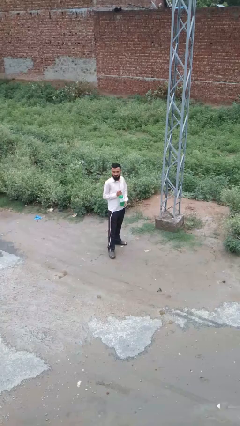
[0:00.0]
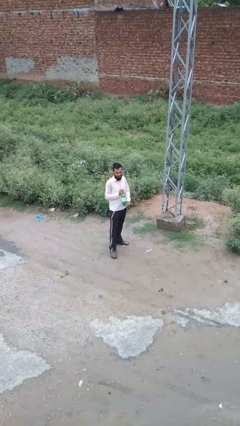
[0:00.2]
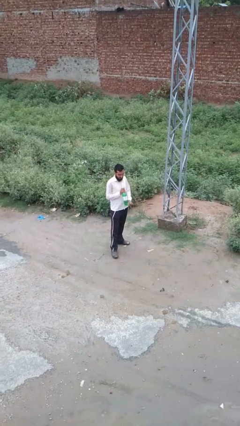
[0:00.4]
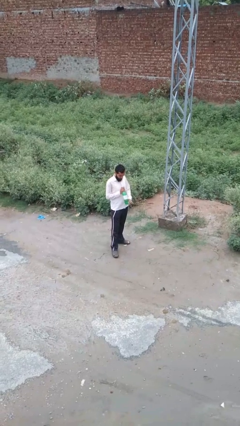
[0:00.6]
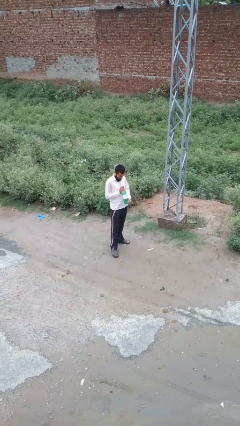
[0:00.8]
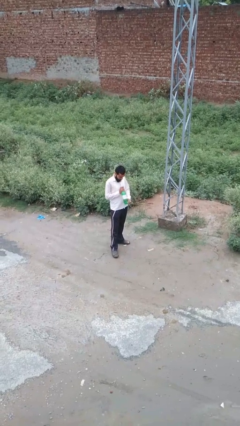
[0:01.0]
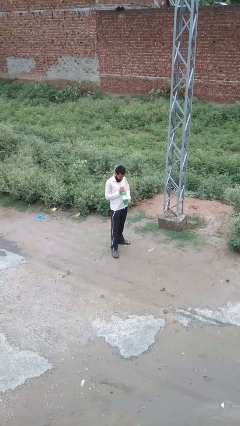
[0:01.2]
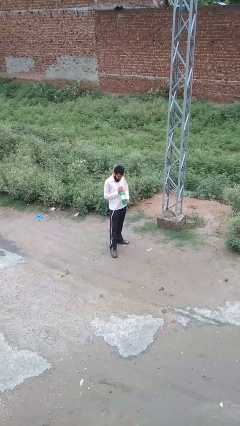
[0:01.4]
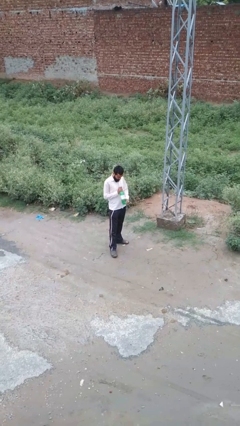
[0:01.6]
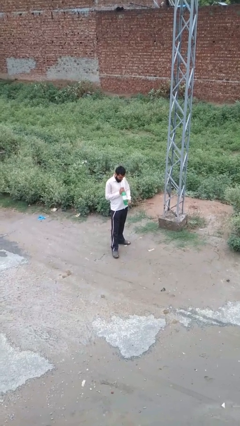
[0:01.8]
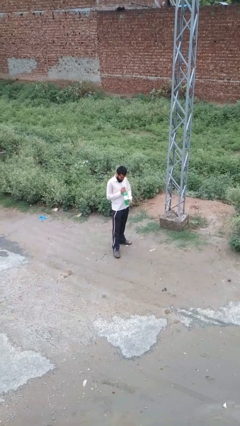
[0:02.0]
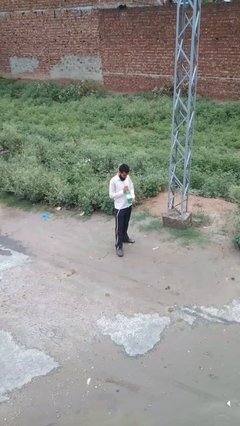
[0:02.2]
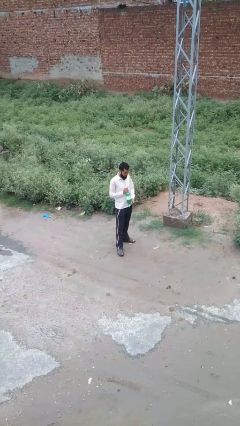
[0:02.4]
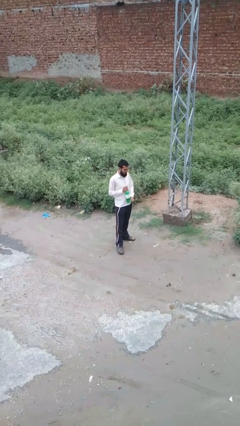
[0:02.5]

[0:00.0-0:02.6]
person drinks from straw

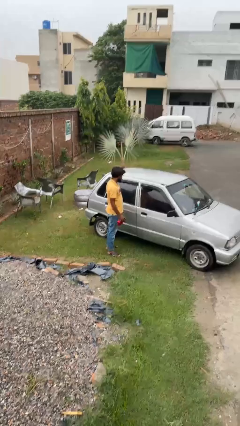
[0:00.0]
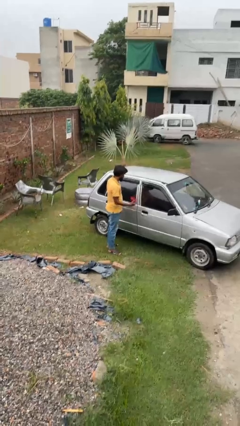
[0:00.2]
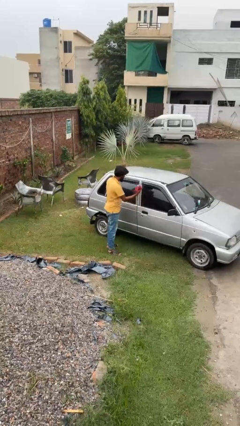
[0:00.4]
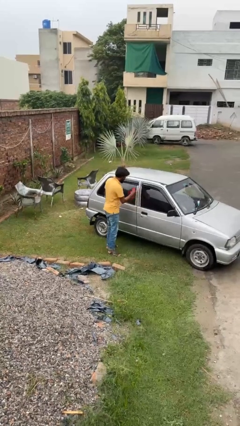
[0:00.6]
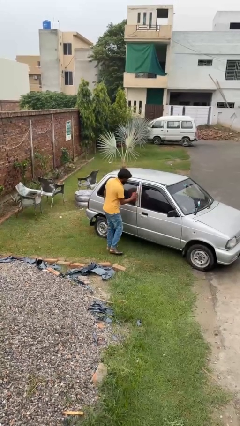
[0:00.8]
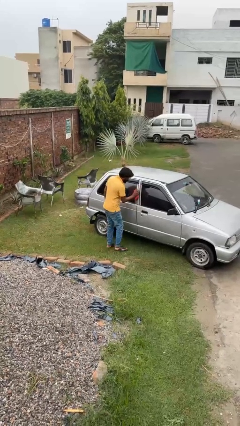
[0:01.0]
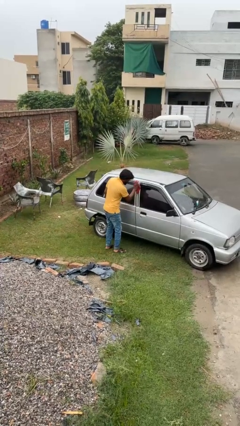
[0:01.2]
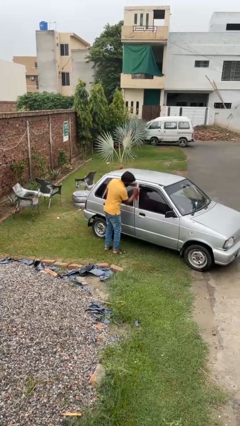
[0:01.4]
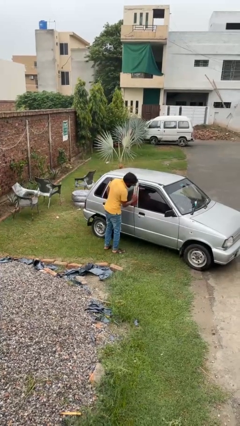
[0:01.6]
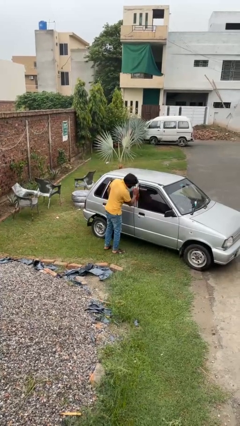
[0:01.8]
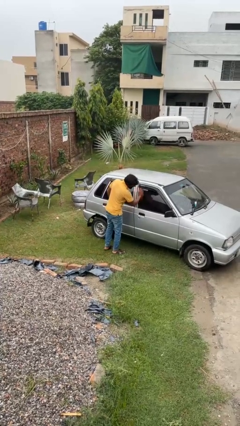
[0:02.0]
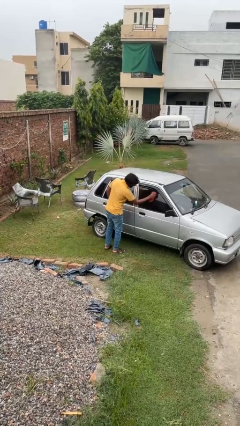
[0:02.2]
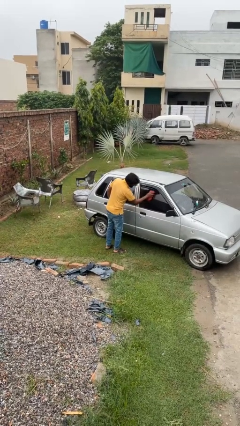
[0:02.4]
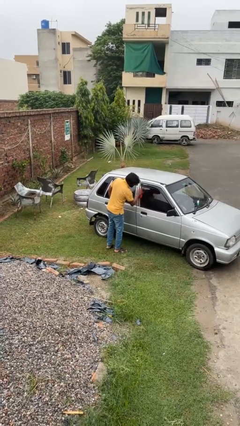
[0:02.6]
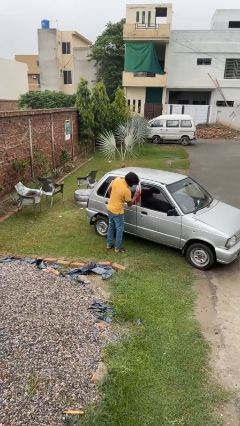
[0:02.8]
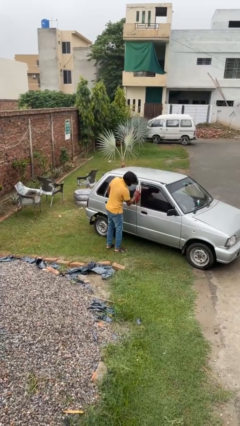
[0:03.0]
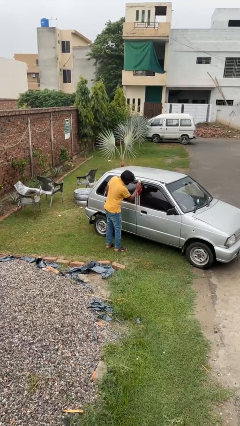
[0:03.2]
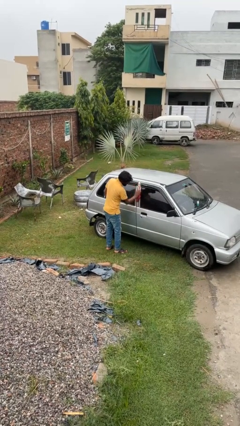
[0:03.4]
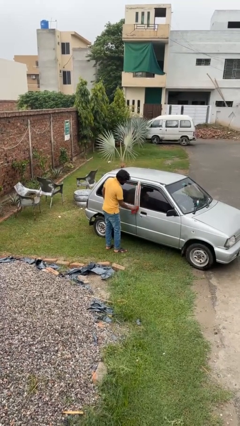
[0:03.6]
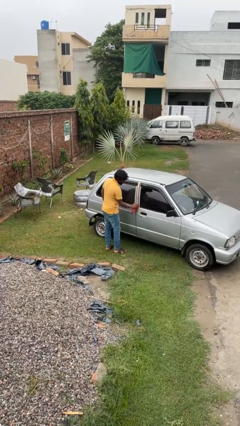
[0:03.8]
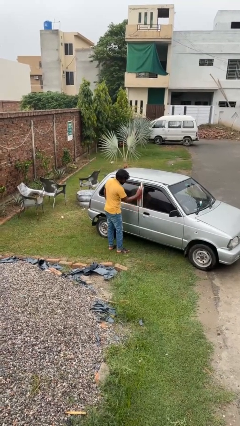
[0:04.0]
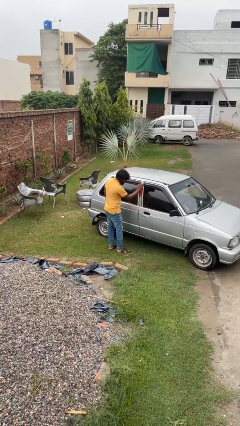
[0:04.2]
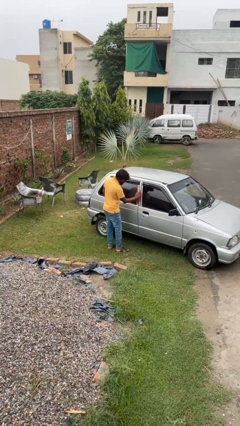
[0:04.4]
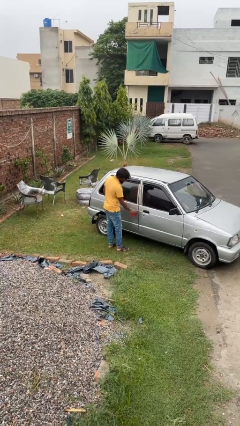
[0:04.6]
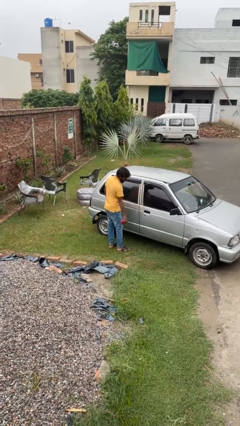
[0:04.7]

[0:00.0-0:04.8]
person polishes car with rag

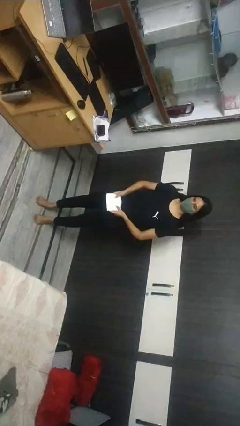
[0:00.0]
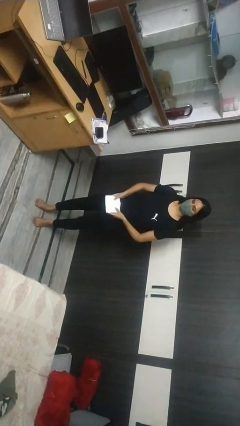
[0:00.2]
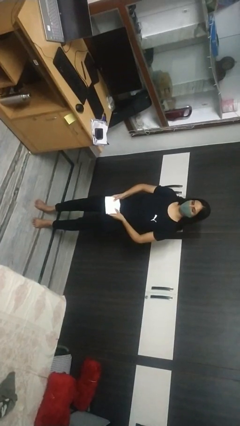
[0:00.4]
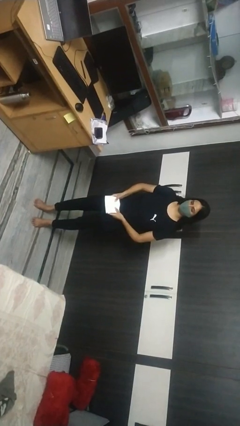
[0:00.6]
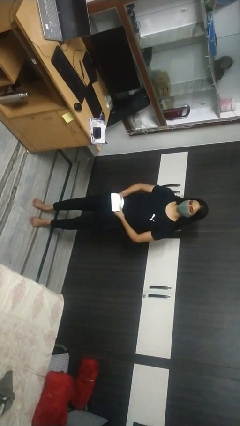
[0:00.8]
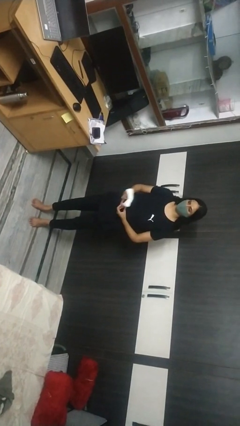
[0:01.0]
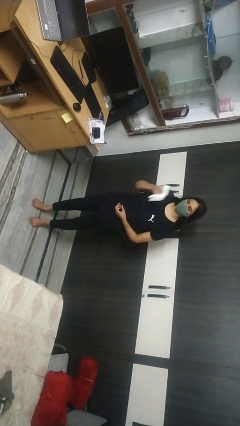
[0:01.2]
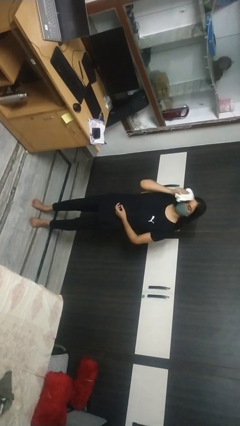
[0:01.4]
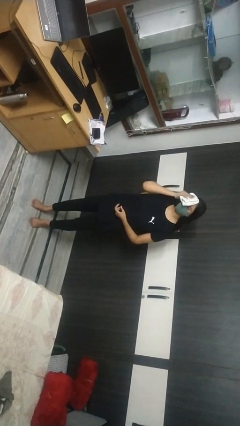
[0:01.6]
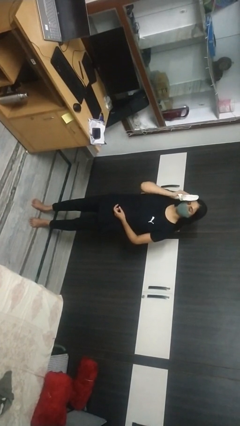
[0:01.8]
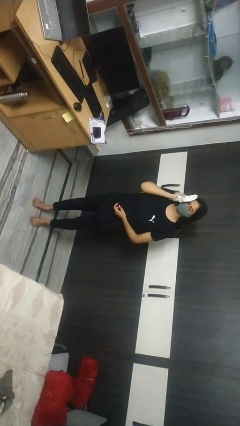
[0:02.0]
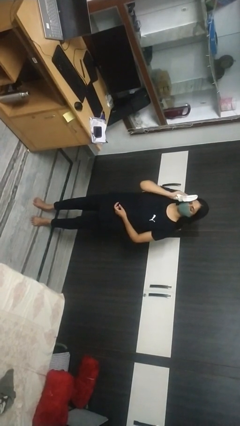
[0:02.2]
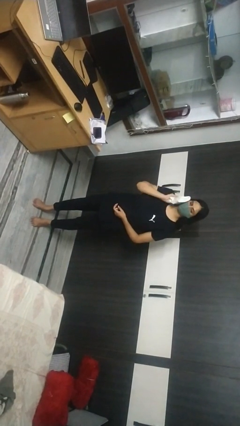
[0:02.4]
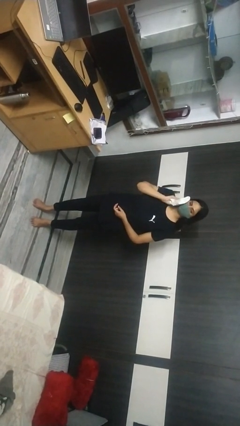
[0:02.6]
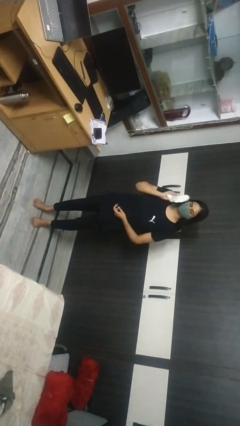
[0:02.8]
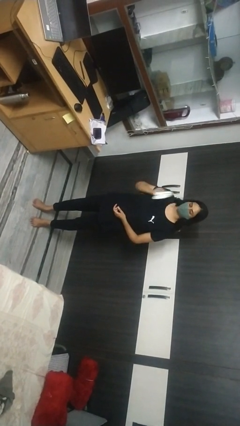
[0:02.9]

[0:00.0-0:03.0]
person wipes mouth with napkin

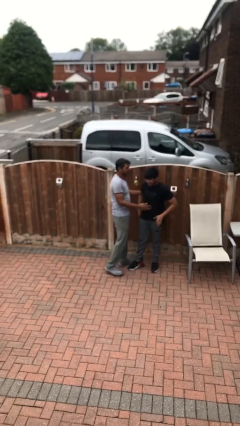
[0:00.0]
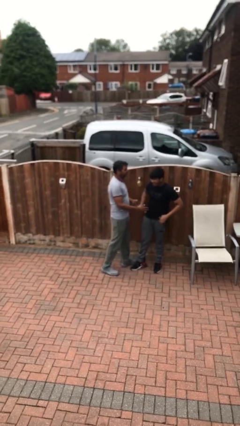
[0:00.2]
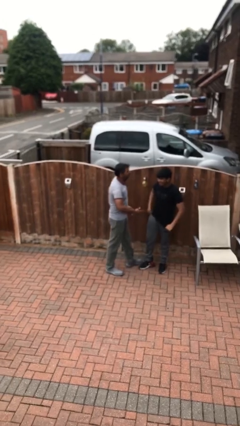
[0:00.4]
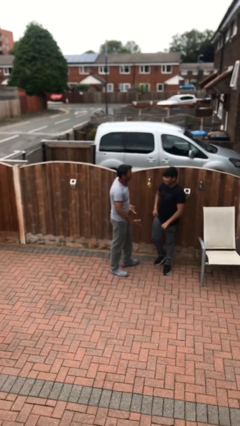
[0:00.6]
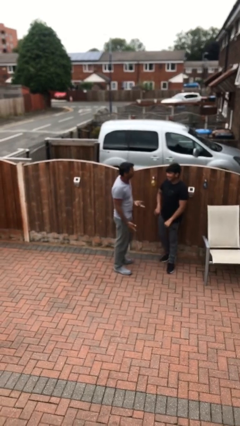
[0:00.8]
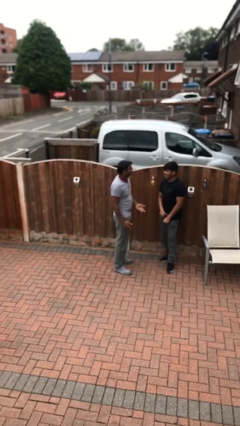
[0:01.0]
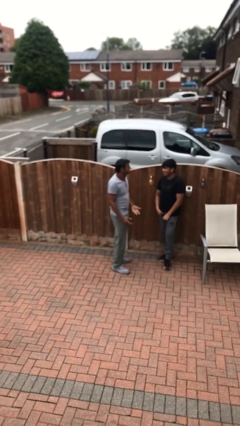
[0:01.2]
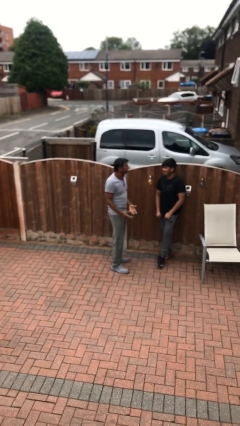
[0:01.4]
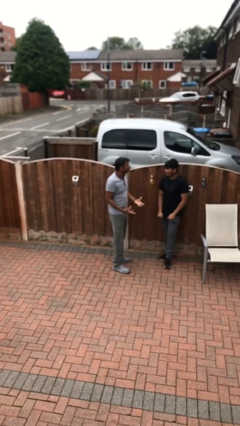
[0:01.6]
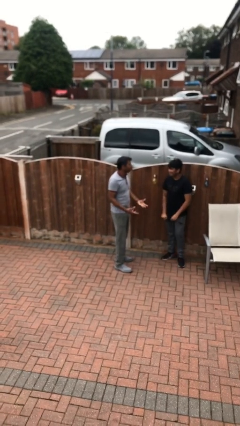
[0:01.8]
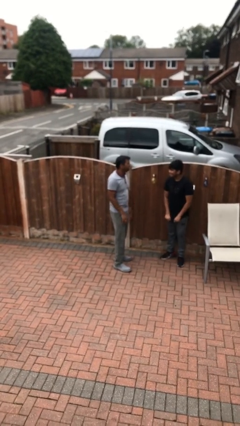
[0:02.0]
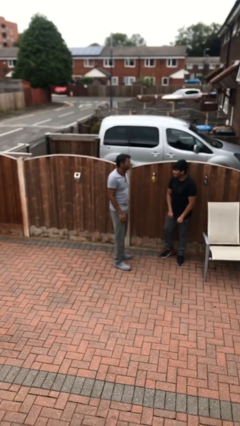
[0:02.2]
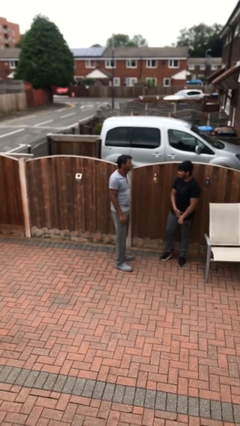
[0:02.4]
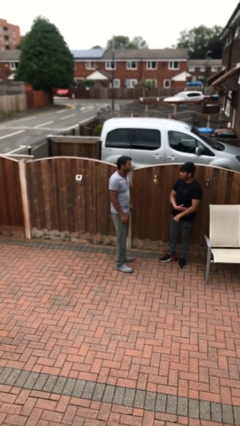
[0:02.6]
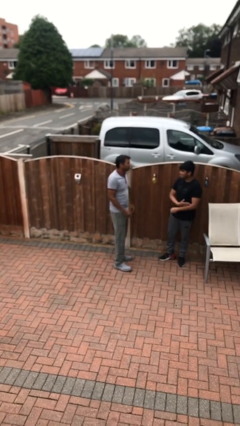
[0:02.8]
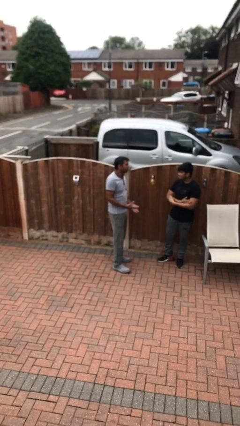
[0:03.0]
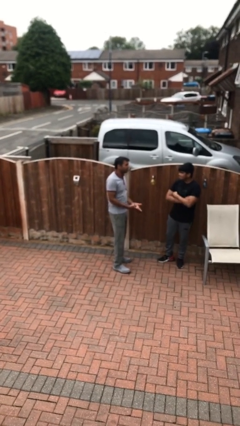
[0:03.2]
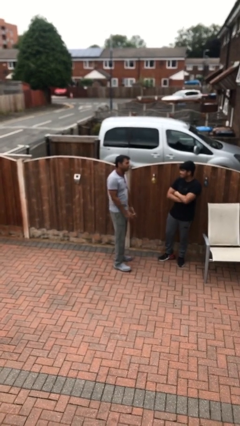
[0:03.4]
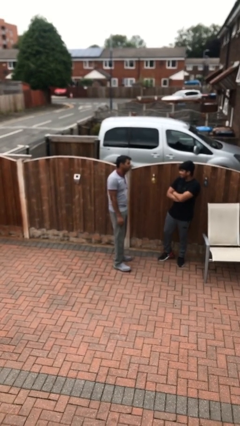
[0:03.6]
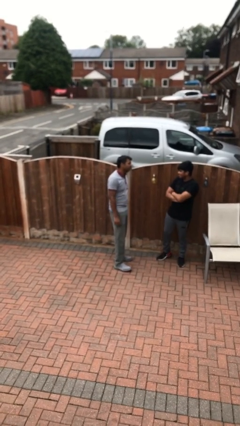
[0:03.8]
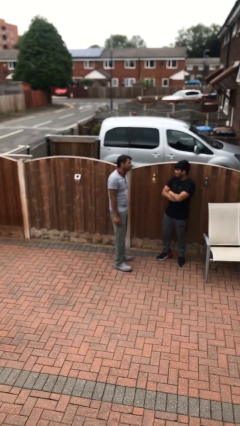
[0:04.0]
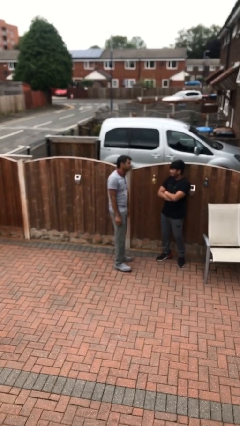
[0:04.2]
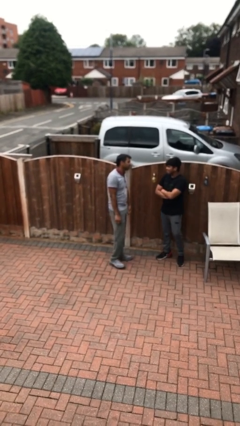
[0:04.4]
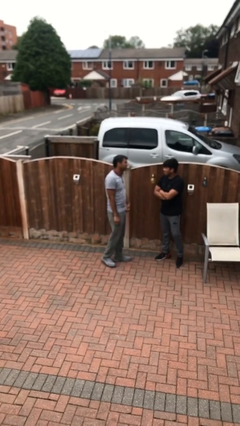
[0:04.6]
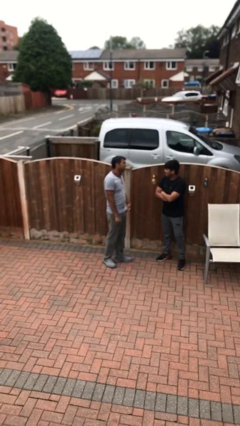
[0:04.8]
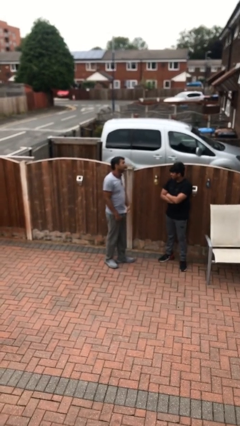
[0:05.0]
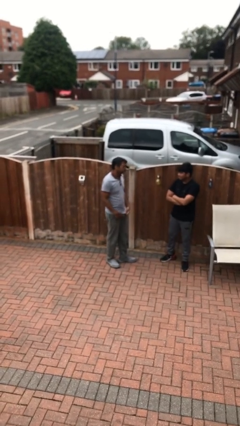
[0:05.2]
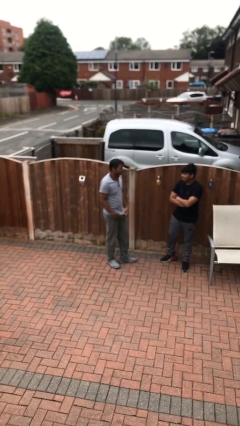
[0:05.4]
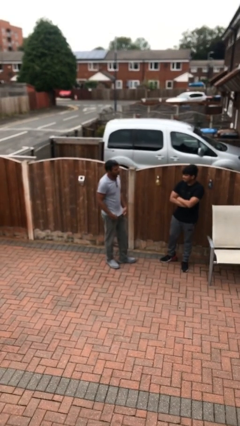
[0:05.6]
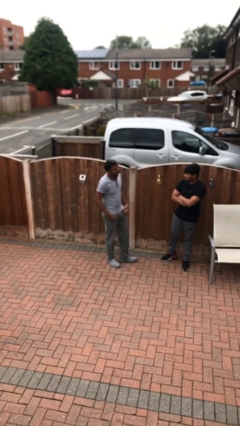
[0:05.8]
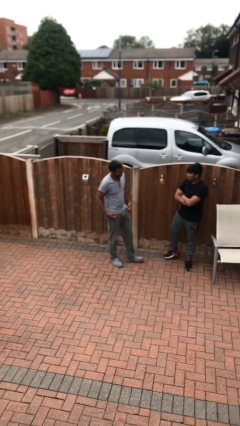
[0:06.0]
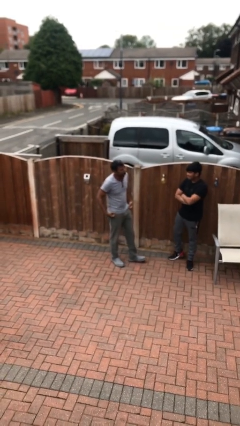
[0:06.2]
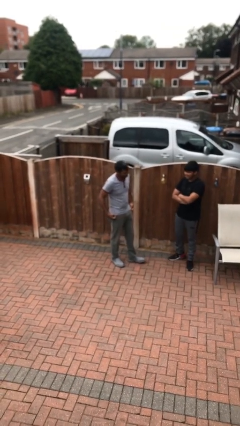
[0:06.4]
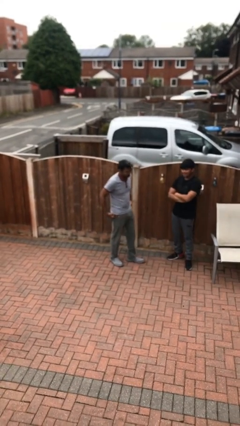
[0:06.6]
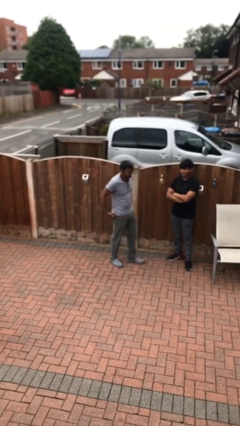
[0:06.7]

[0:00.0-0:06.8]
person talks to person

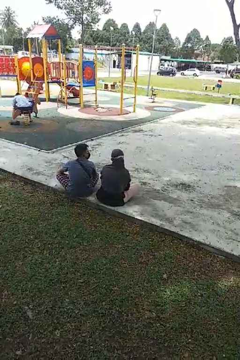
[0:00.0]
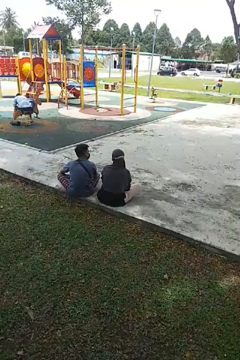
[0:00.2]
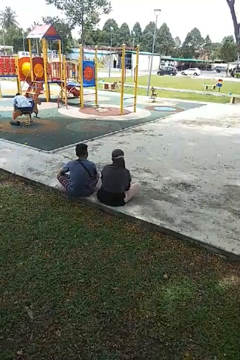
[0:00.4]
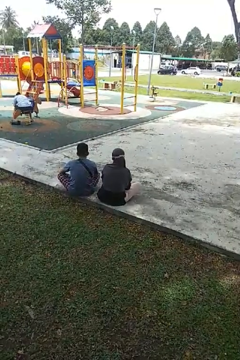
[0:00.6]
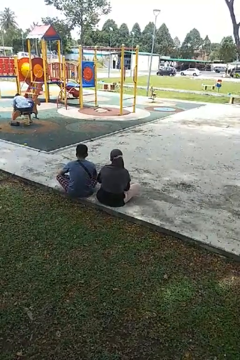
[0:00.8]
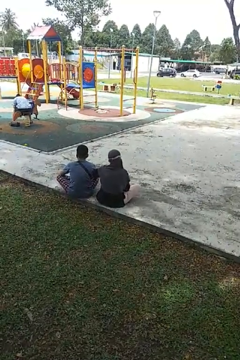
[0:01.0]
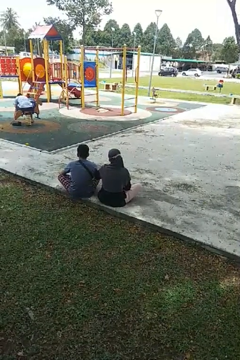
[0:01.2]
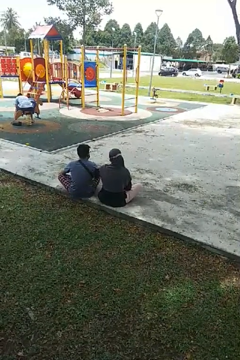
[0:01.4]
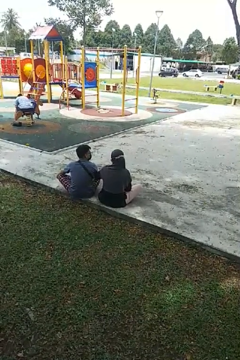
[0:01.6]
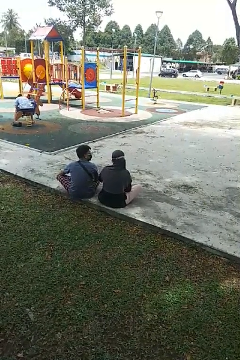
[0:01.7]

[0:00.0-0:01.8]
person nudges person with elbow
